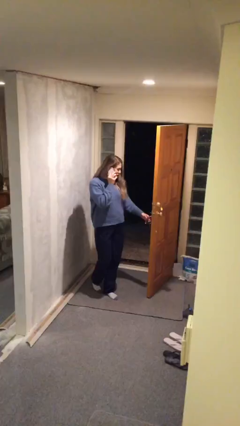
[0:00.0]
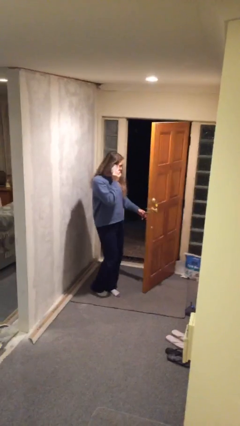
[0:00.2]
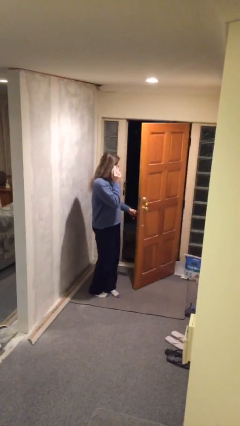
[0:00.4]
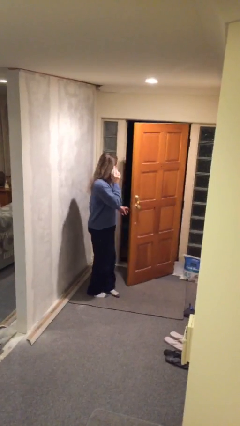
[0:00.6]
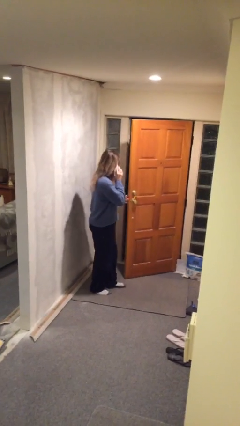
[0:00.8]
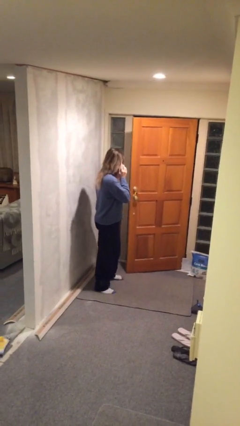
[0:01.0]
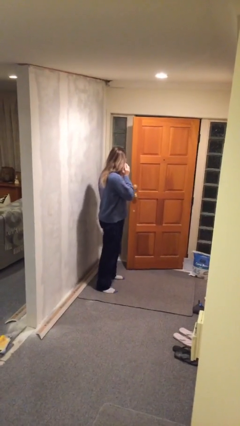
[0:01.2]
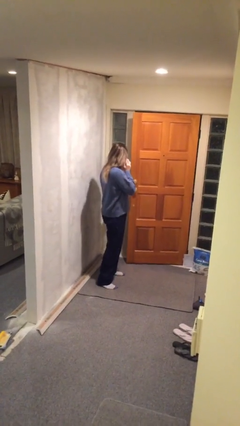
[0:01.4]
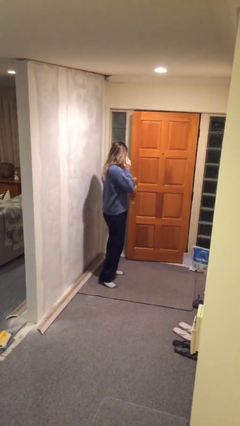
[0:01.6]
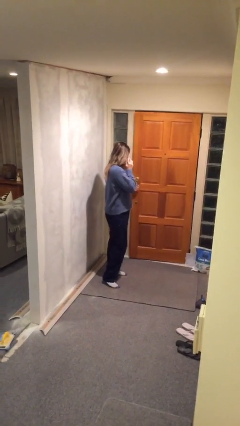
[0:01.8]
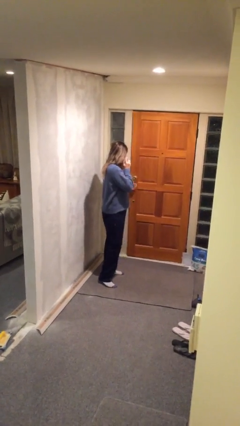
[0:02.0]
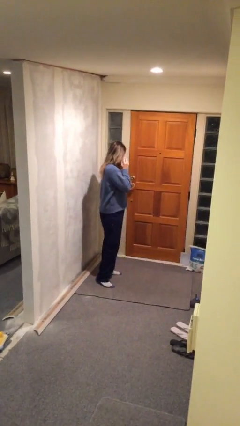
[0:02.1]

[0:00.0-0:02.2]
person closes facility door

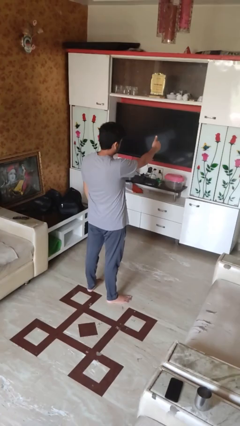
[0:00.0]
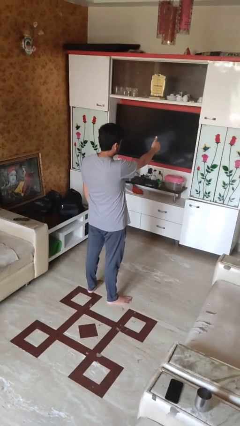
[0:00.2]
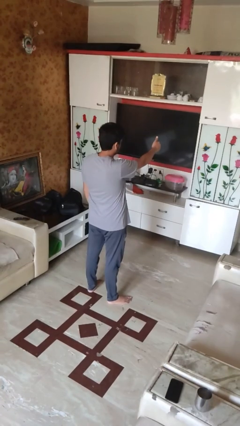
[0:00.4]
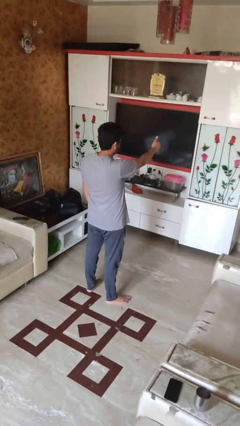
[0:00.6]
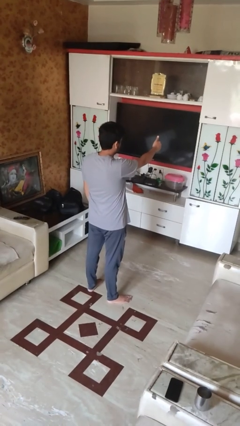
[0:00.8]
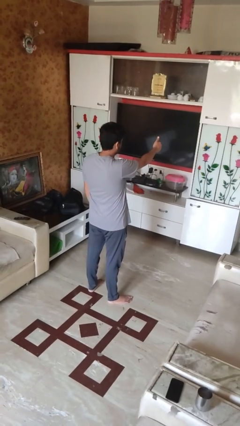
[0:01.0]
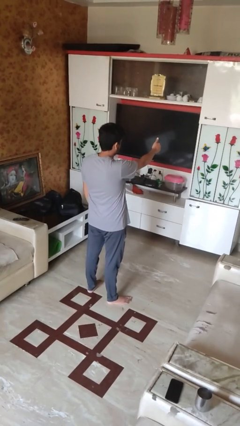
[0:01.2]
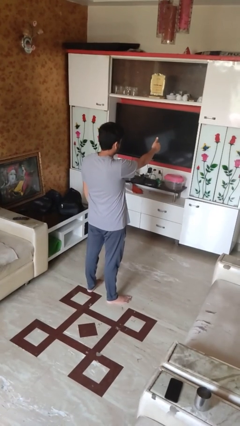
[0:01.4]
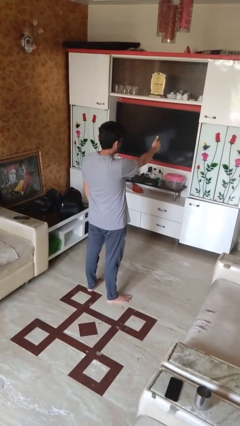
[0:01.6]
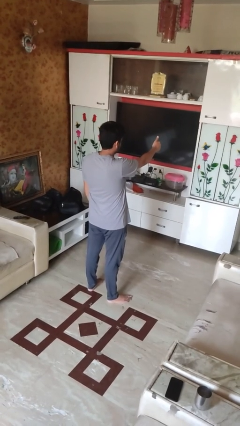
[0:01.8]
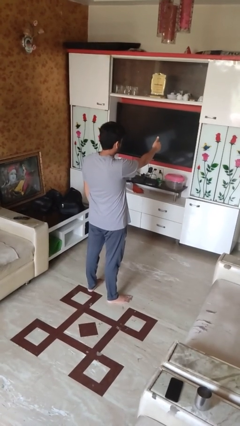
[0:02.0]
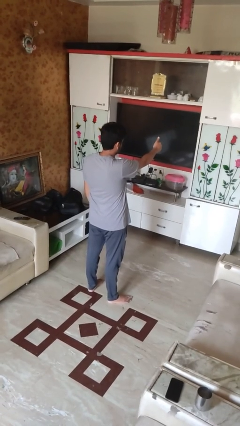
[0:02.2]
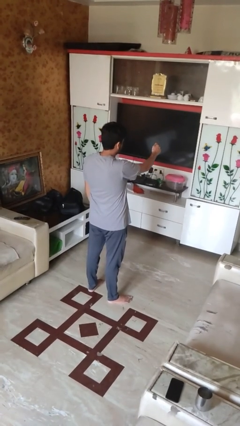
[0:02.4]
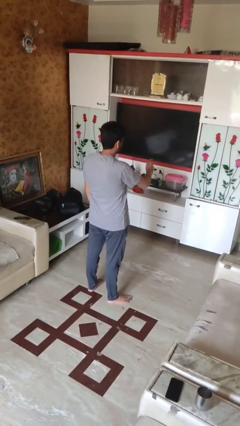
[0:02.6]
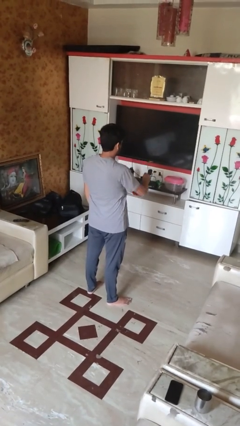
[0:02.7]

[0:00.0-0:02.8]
person gestures thumbs up

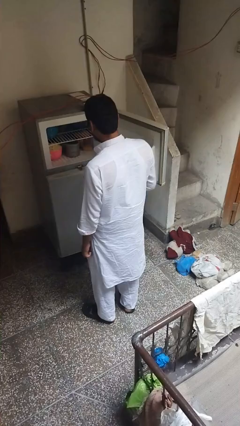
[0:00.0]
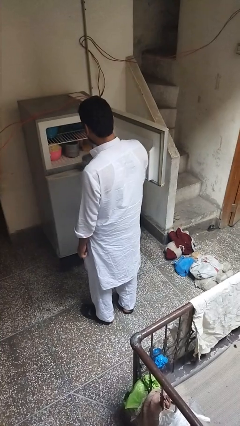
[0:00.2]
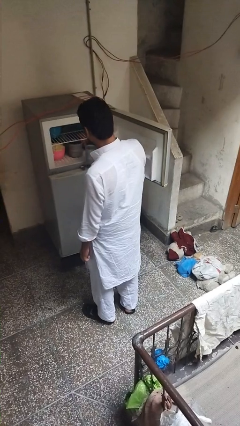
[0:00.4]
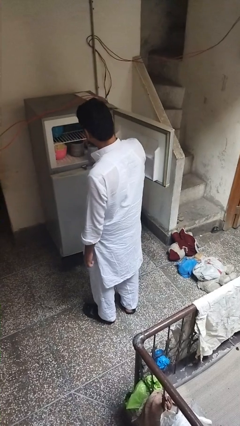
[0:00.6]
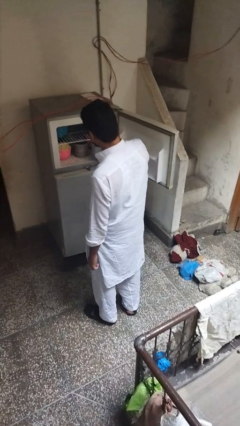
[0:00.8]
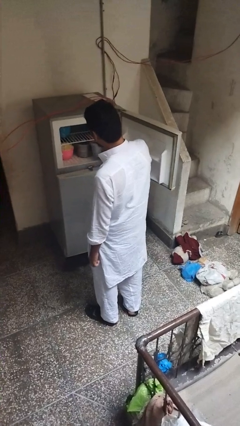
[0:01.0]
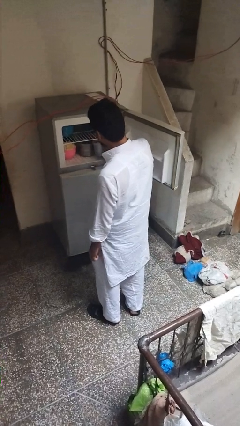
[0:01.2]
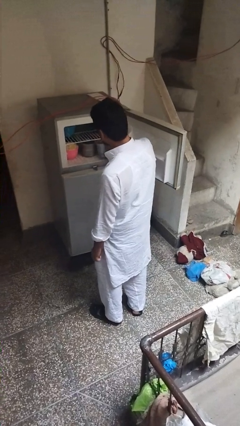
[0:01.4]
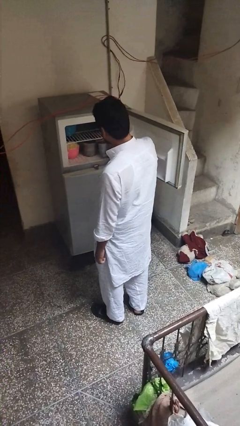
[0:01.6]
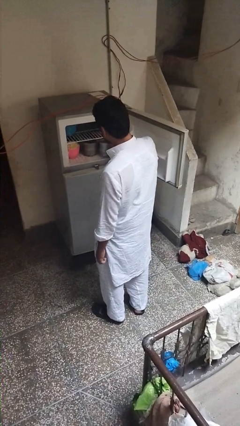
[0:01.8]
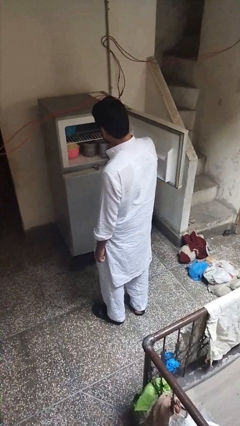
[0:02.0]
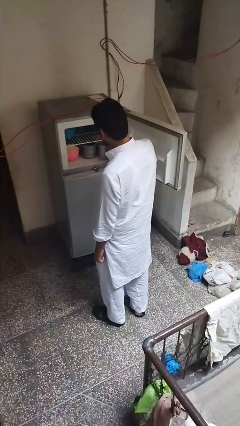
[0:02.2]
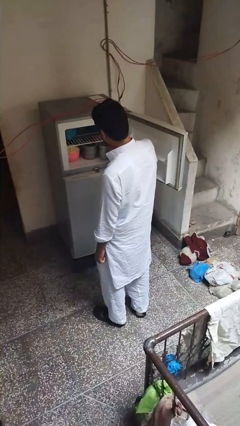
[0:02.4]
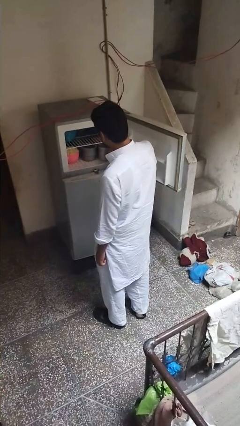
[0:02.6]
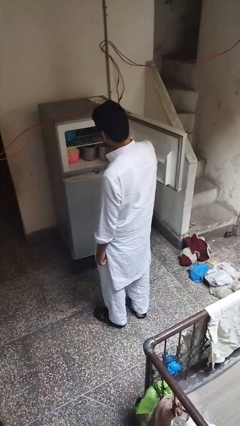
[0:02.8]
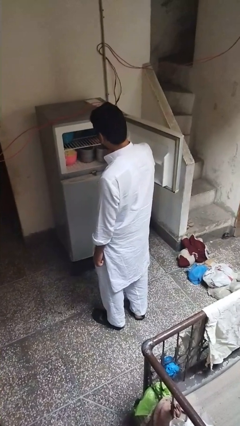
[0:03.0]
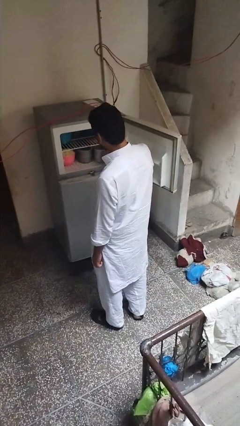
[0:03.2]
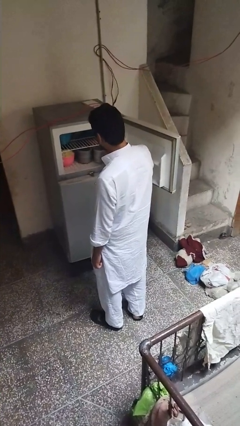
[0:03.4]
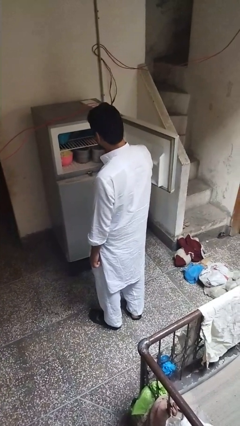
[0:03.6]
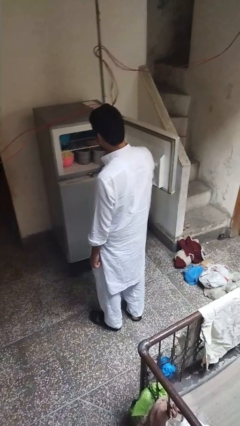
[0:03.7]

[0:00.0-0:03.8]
person puts object into refrigerator

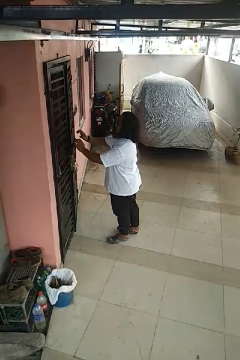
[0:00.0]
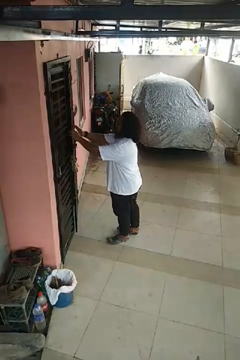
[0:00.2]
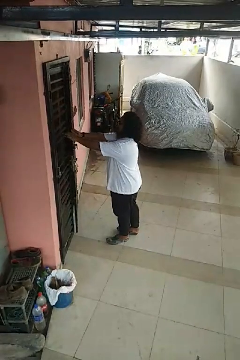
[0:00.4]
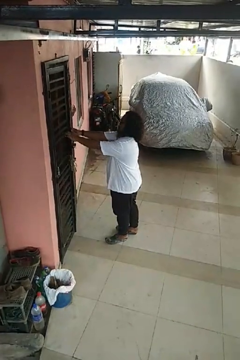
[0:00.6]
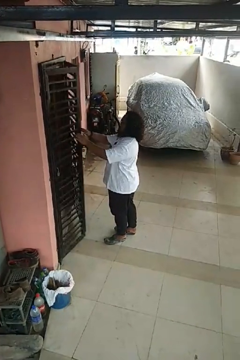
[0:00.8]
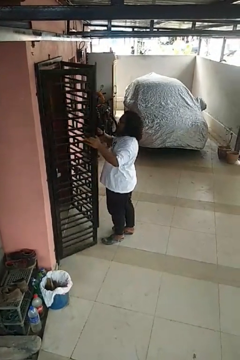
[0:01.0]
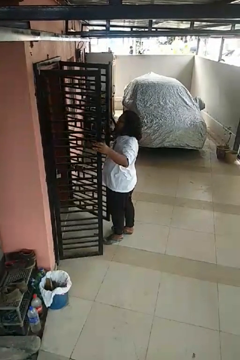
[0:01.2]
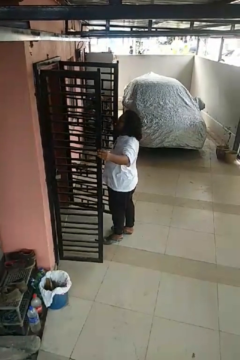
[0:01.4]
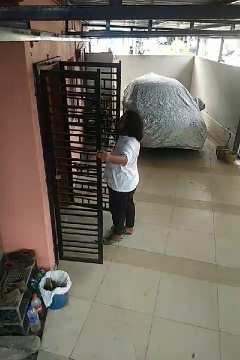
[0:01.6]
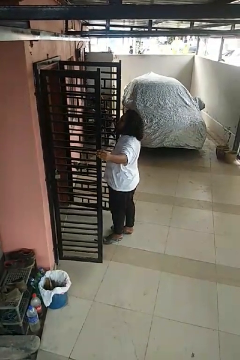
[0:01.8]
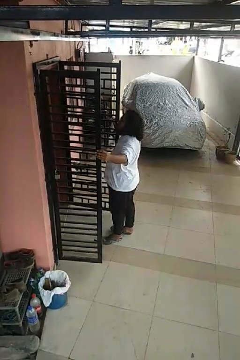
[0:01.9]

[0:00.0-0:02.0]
person opens gate

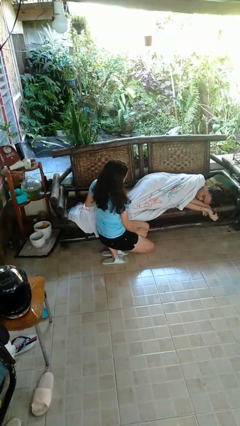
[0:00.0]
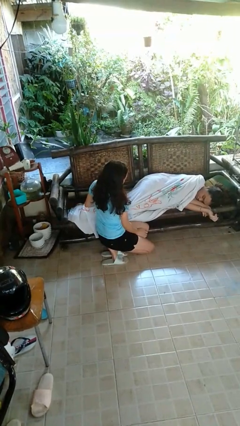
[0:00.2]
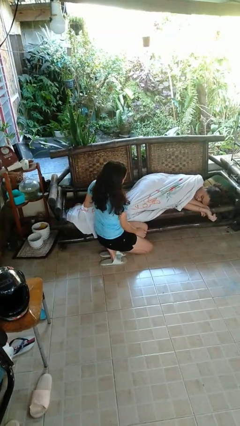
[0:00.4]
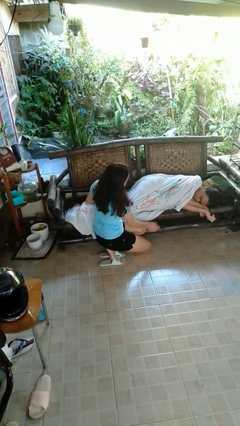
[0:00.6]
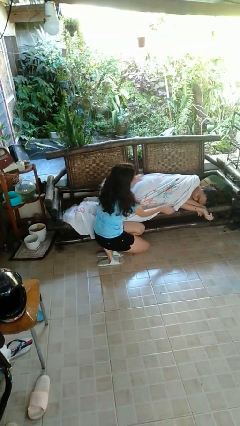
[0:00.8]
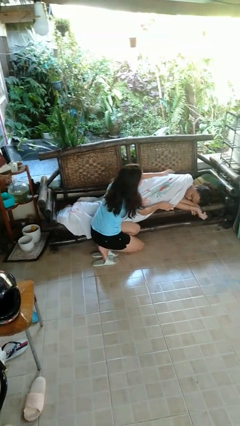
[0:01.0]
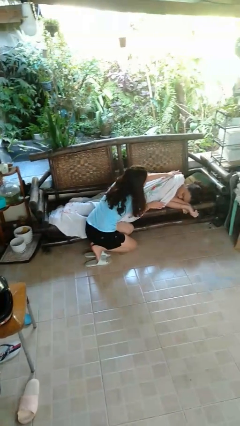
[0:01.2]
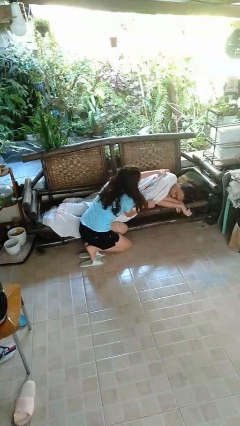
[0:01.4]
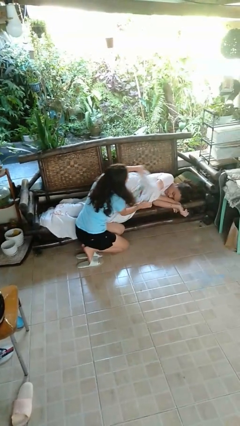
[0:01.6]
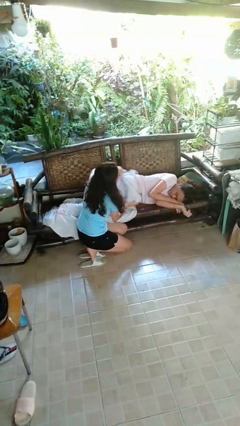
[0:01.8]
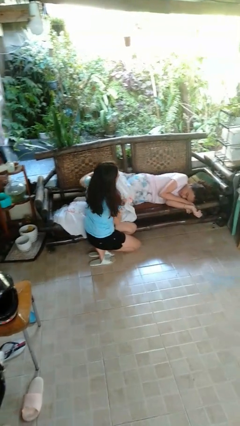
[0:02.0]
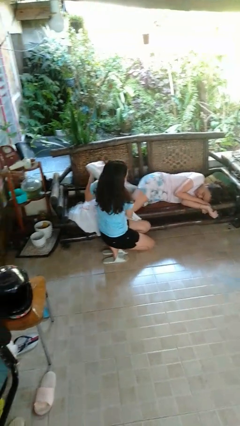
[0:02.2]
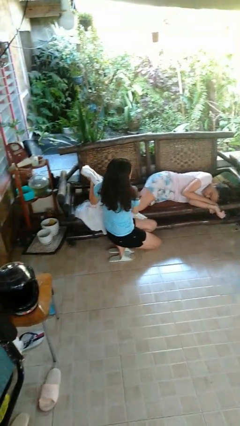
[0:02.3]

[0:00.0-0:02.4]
person uncovers friend with blanket

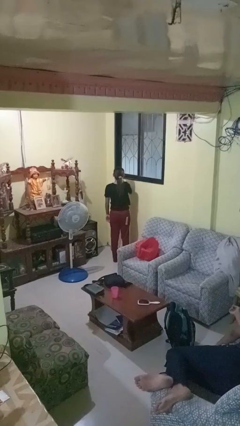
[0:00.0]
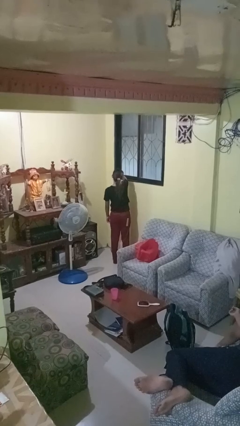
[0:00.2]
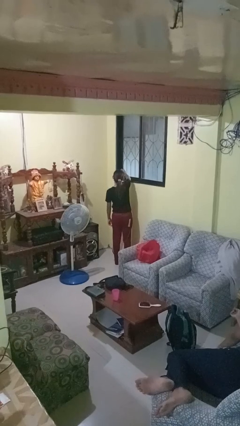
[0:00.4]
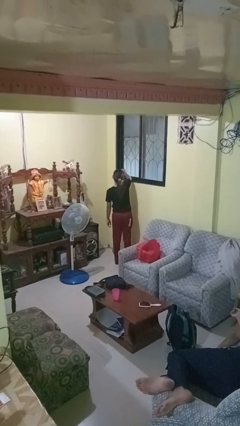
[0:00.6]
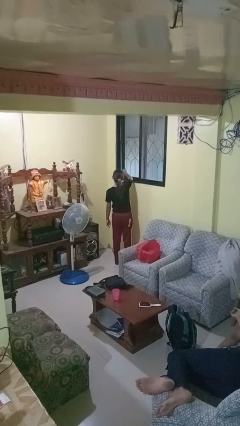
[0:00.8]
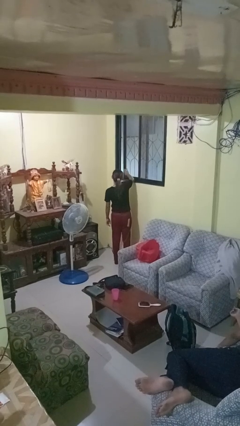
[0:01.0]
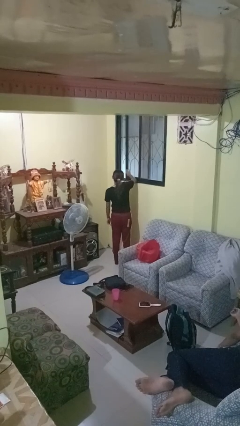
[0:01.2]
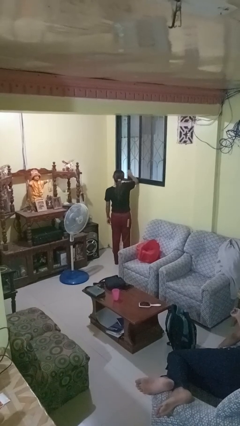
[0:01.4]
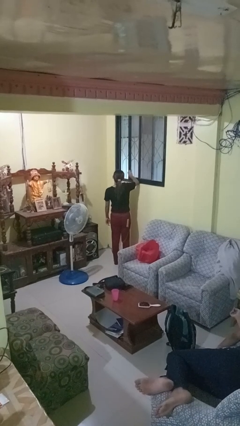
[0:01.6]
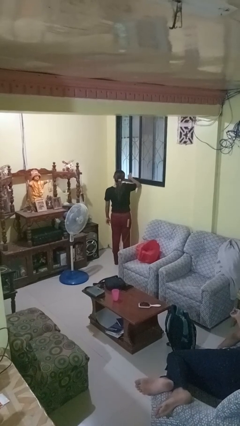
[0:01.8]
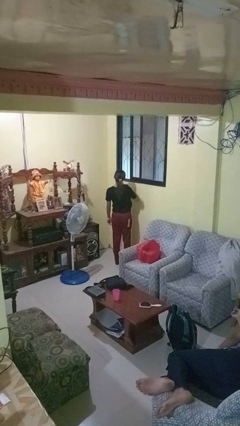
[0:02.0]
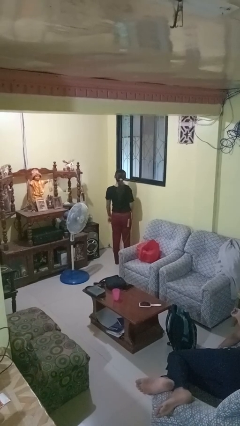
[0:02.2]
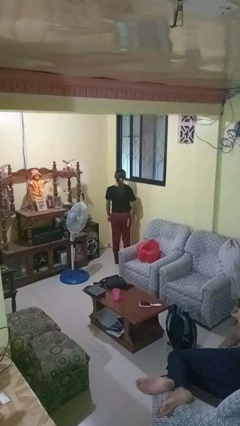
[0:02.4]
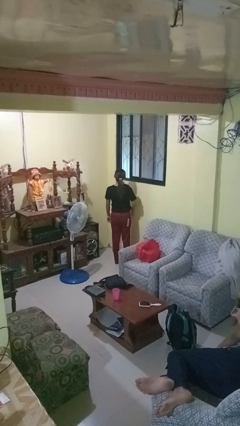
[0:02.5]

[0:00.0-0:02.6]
person opens home window

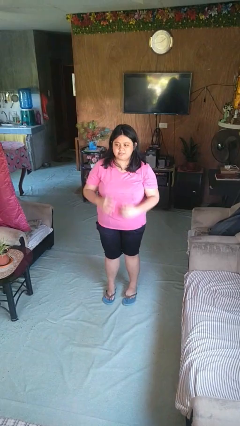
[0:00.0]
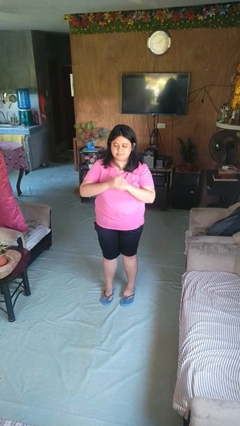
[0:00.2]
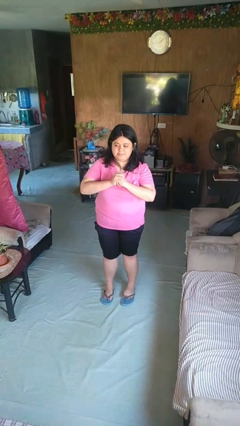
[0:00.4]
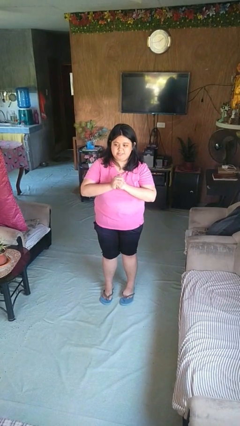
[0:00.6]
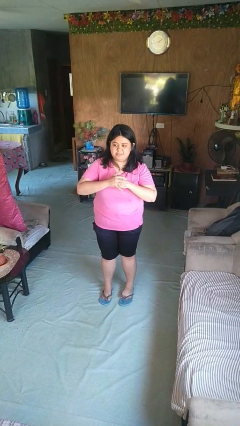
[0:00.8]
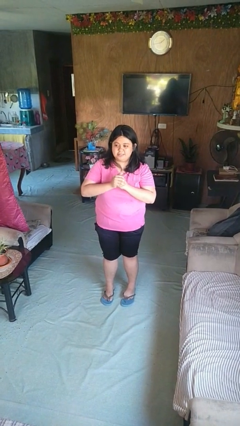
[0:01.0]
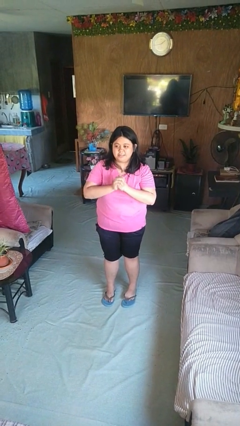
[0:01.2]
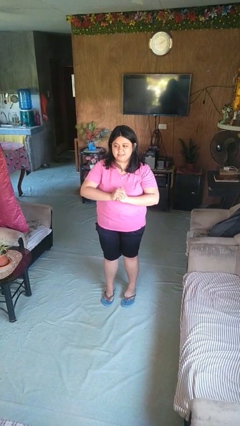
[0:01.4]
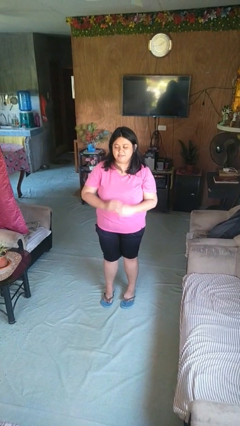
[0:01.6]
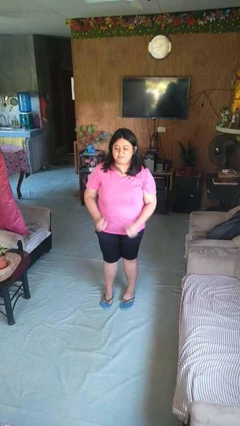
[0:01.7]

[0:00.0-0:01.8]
person cracks knuckles
